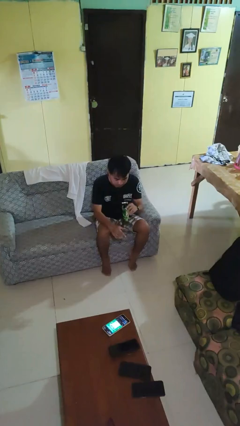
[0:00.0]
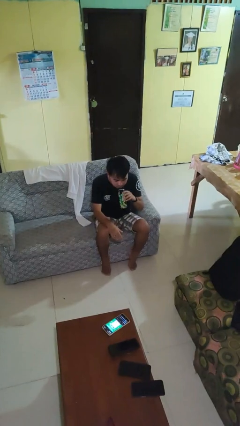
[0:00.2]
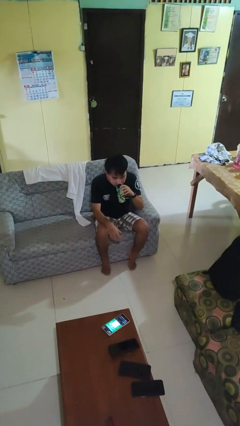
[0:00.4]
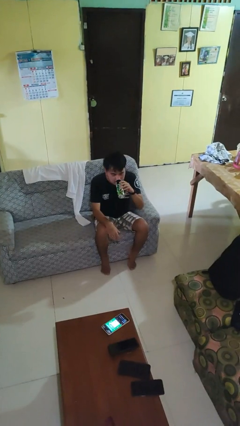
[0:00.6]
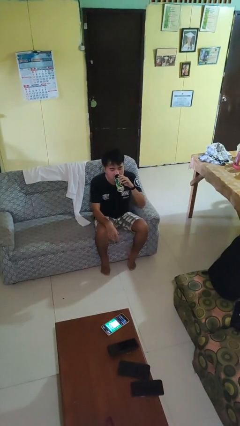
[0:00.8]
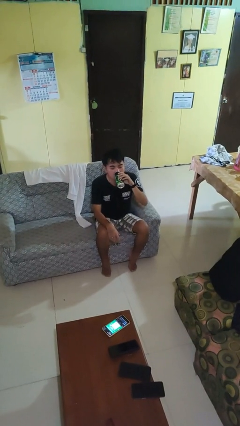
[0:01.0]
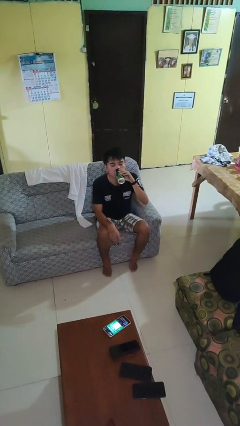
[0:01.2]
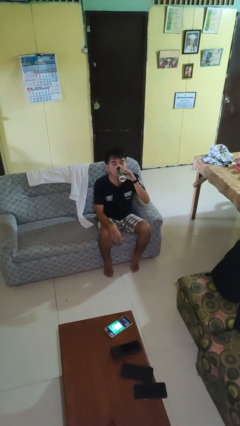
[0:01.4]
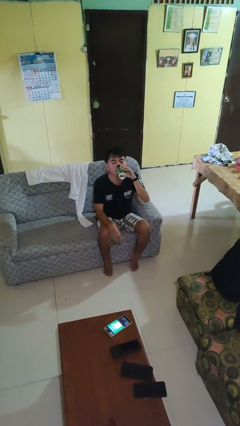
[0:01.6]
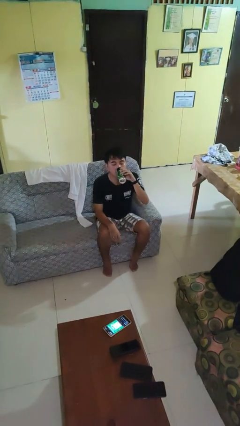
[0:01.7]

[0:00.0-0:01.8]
person drinks from beverage can

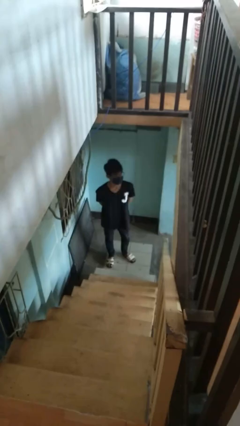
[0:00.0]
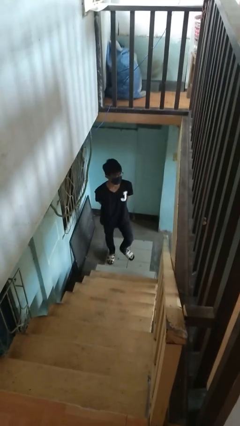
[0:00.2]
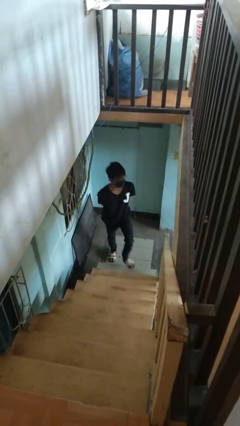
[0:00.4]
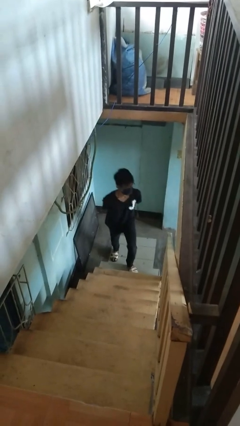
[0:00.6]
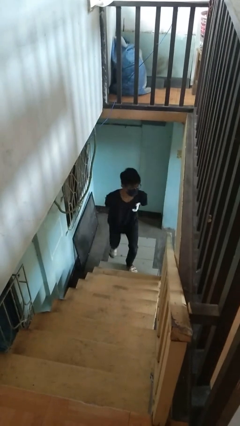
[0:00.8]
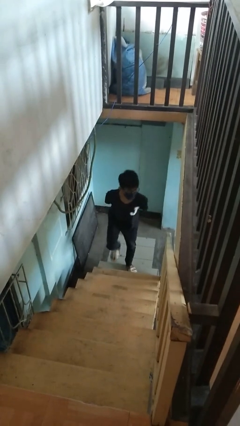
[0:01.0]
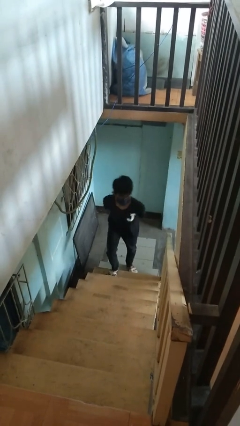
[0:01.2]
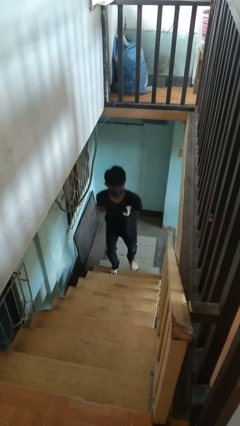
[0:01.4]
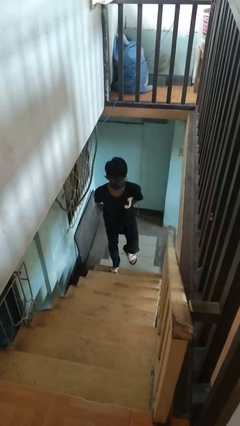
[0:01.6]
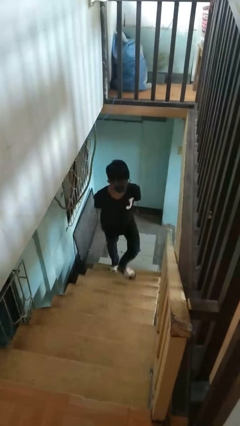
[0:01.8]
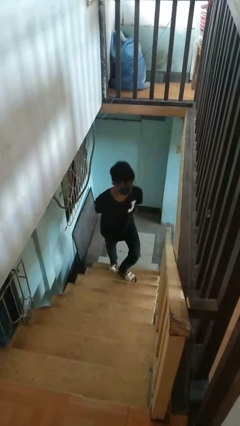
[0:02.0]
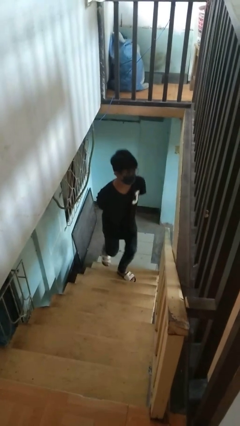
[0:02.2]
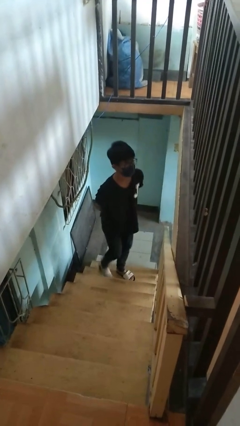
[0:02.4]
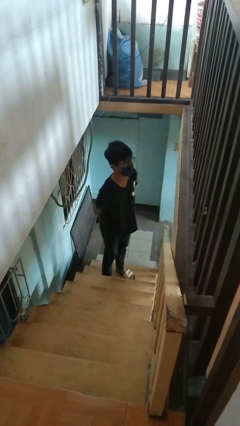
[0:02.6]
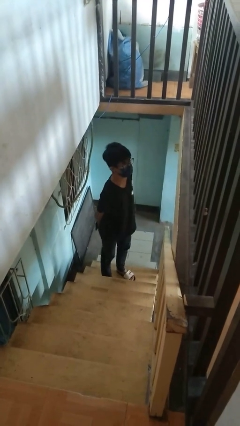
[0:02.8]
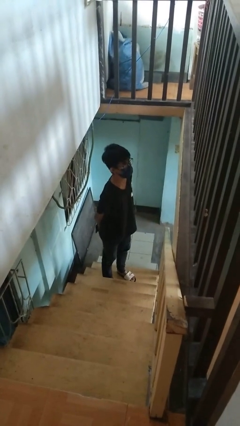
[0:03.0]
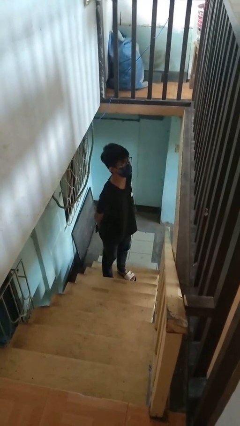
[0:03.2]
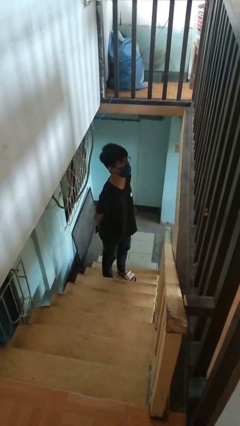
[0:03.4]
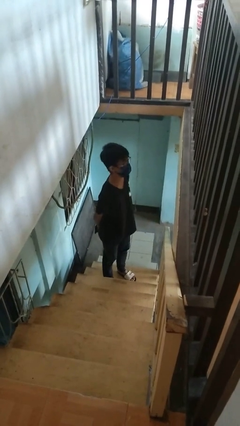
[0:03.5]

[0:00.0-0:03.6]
person climbs up ladder

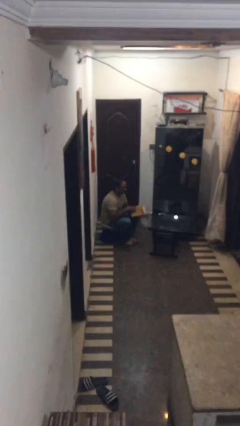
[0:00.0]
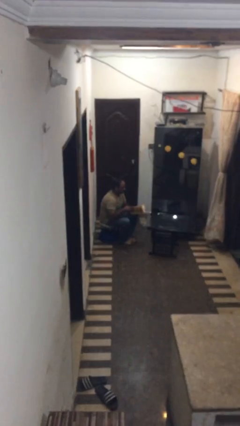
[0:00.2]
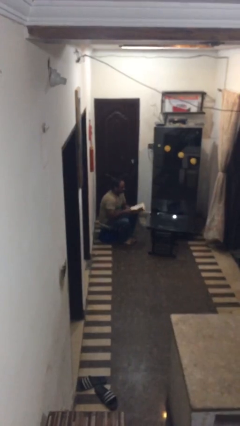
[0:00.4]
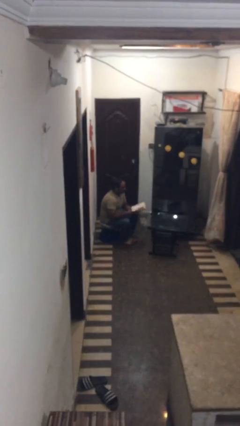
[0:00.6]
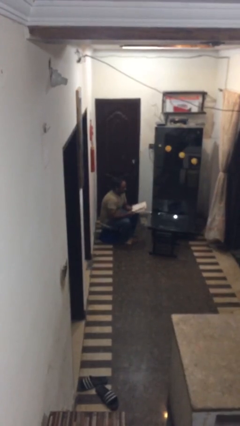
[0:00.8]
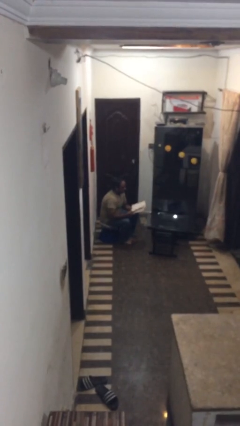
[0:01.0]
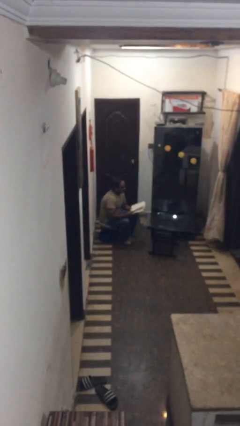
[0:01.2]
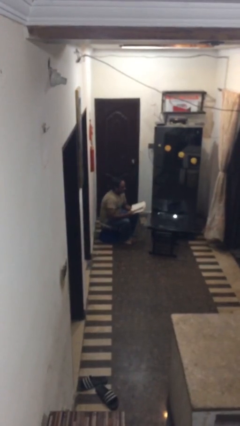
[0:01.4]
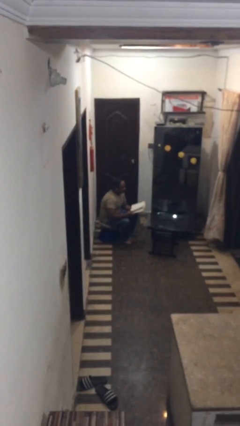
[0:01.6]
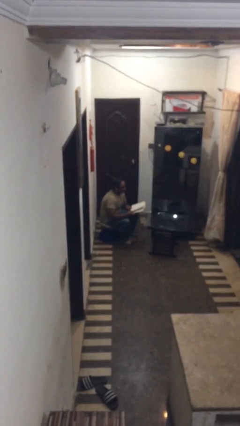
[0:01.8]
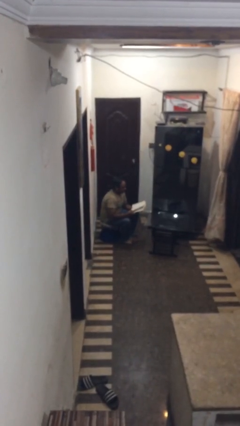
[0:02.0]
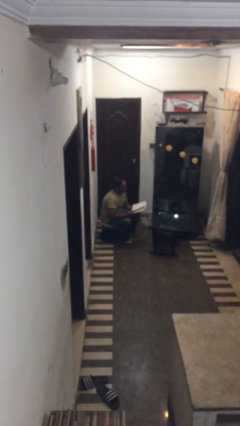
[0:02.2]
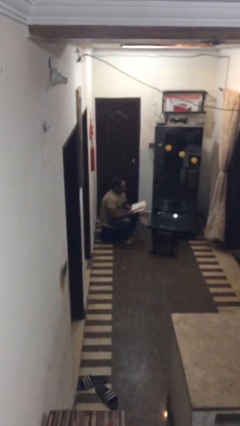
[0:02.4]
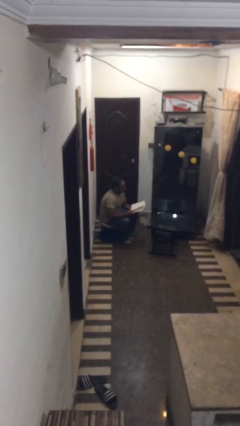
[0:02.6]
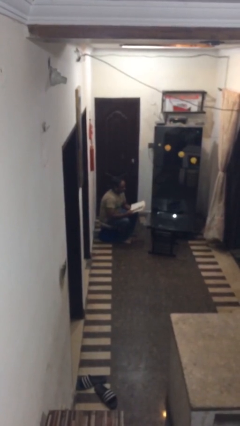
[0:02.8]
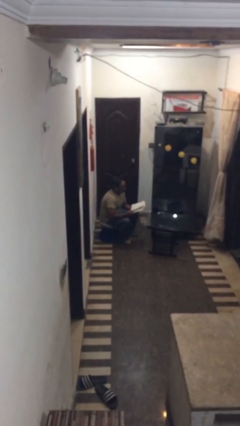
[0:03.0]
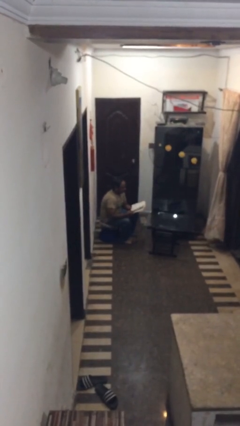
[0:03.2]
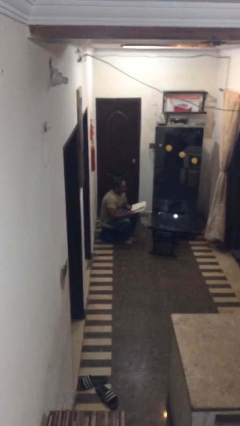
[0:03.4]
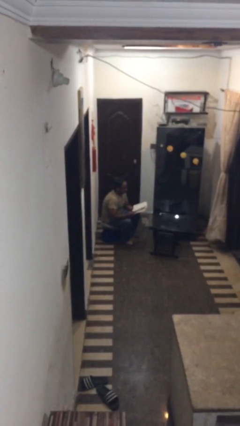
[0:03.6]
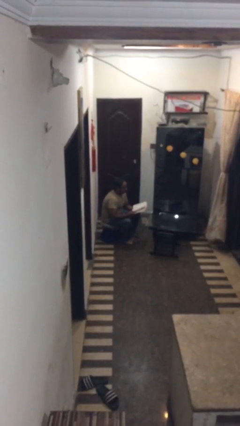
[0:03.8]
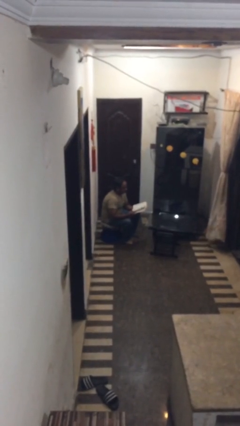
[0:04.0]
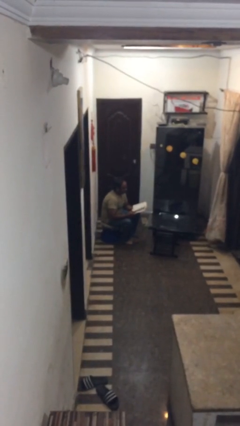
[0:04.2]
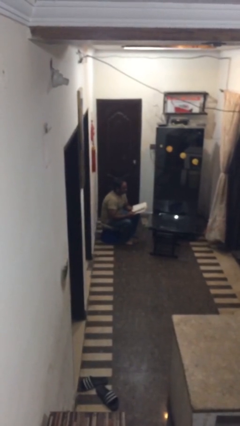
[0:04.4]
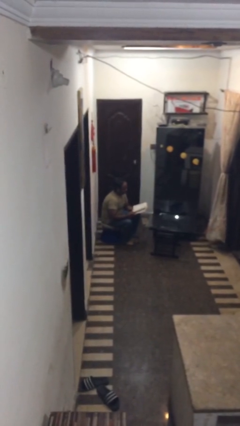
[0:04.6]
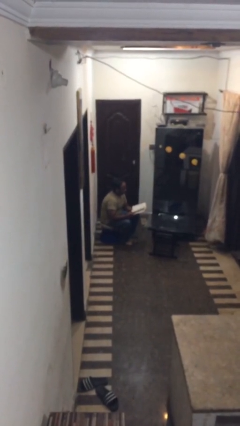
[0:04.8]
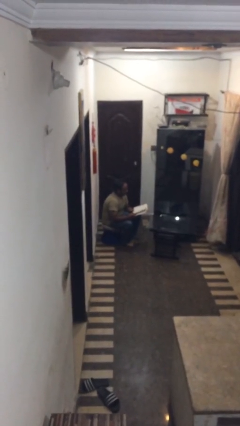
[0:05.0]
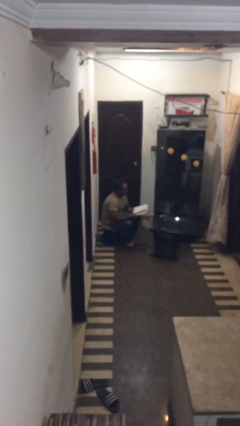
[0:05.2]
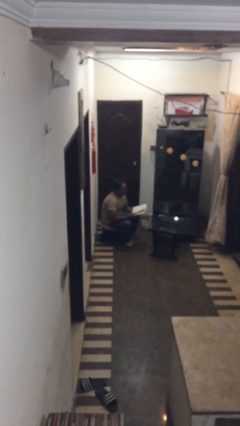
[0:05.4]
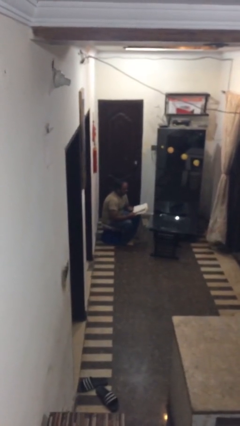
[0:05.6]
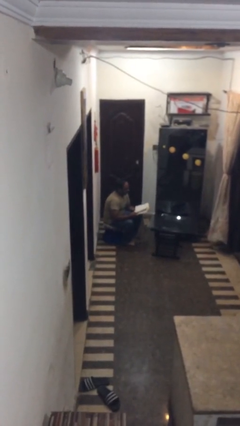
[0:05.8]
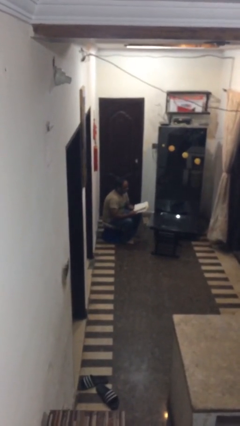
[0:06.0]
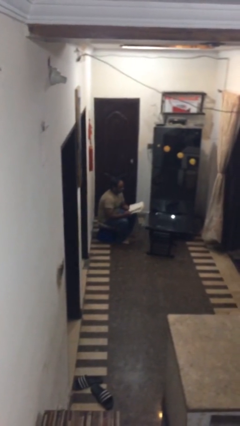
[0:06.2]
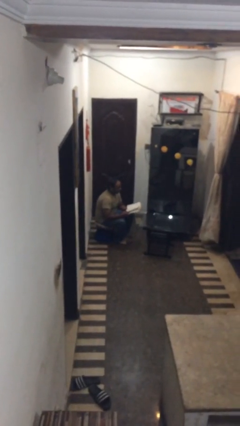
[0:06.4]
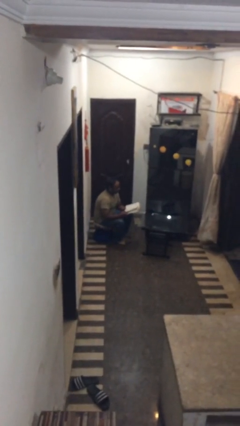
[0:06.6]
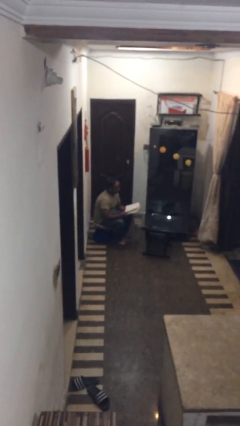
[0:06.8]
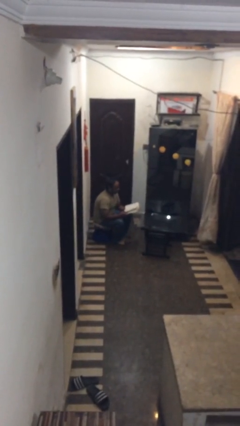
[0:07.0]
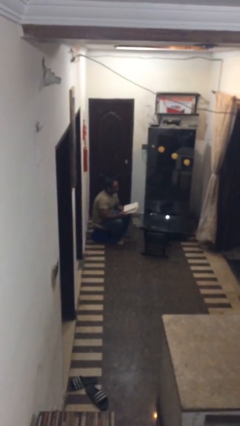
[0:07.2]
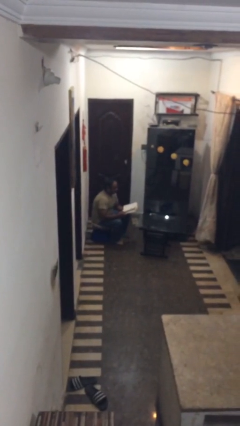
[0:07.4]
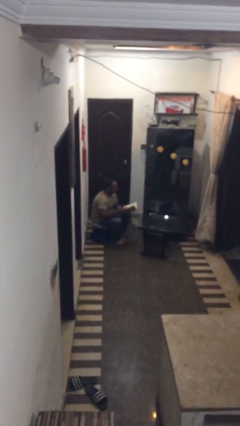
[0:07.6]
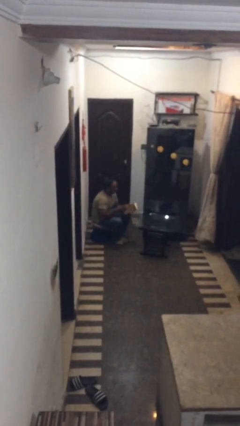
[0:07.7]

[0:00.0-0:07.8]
person reads document

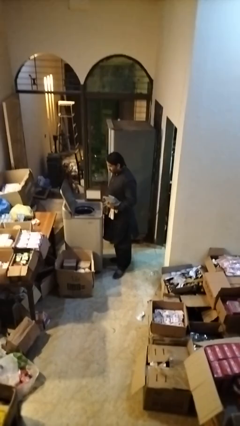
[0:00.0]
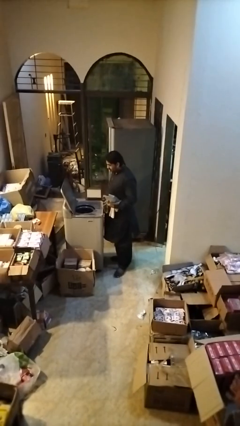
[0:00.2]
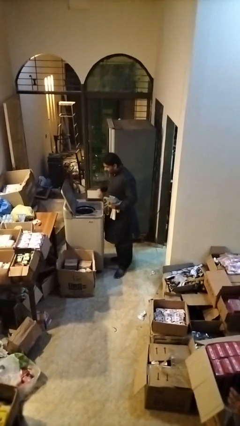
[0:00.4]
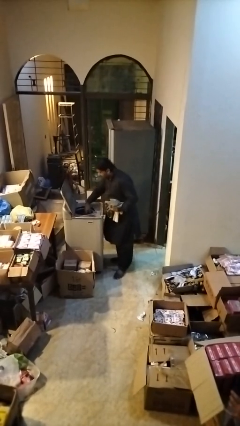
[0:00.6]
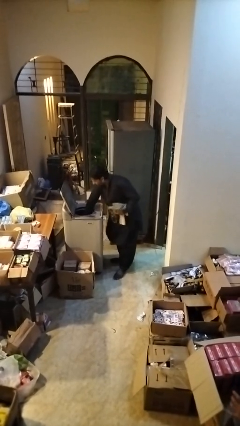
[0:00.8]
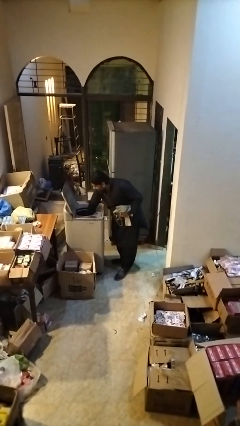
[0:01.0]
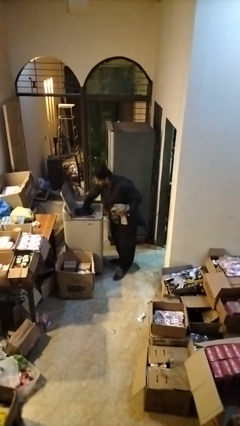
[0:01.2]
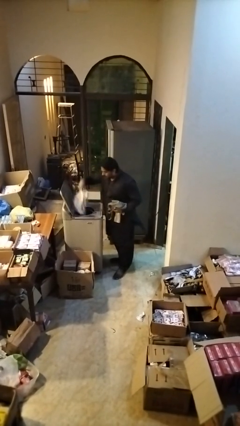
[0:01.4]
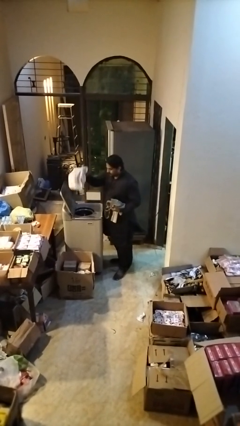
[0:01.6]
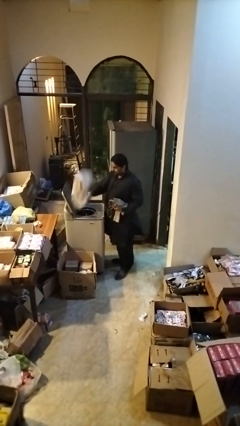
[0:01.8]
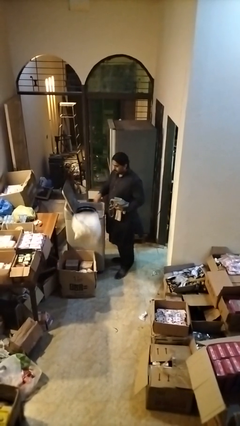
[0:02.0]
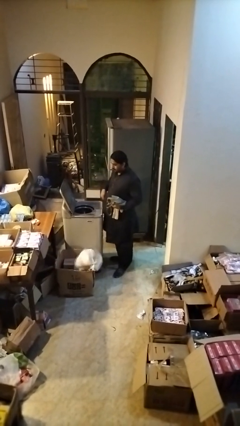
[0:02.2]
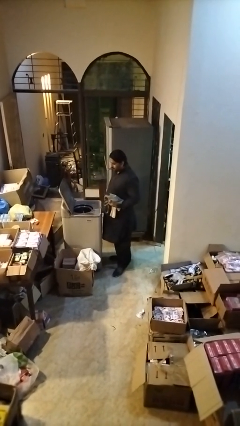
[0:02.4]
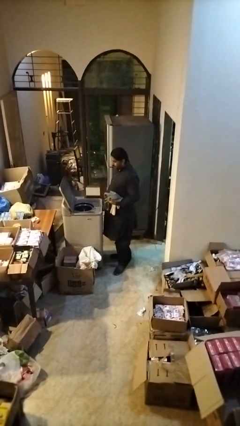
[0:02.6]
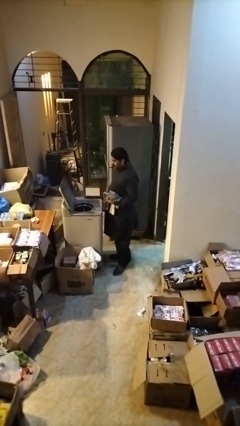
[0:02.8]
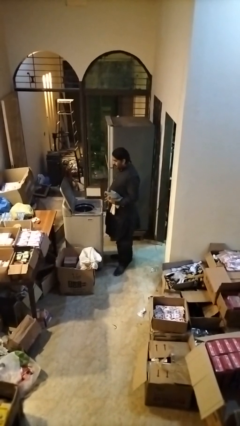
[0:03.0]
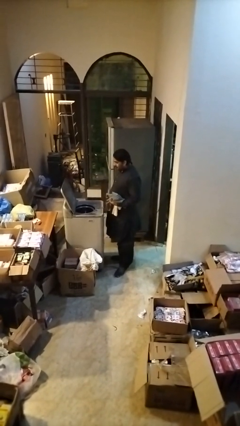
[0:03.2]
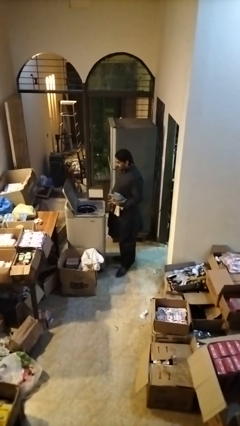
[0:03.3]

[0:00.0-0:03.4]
person unloads dryer

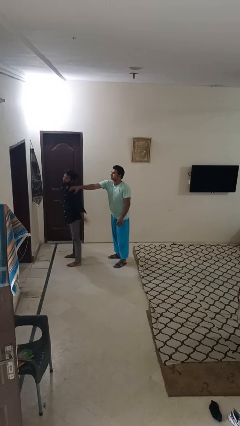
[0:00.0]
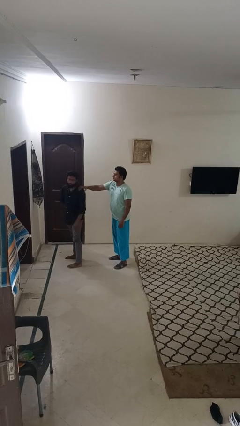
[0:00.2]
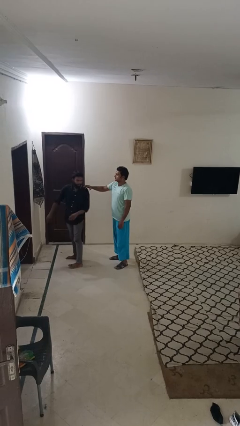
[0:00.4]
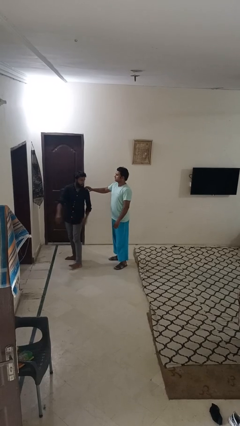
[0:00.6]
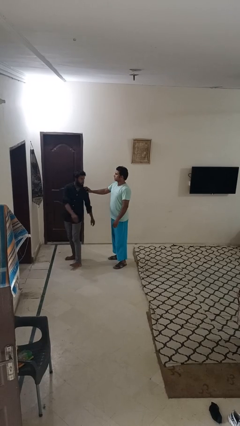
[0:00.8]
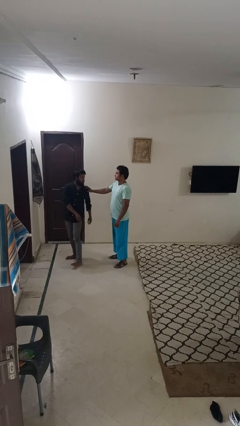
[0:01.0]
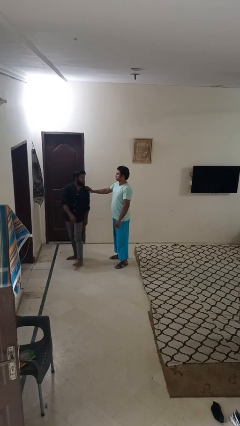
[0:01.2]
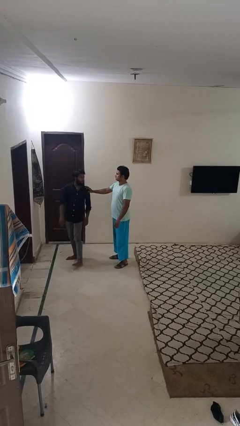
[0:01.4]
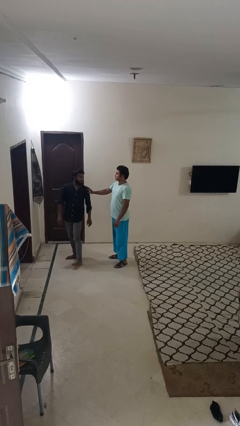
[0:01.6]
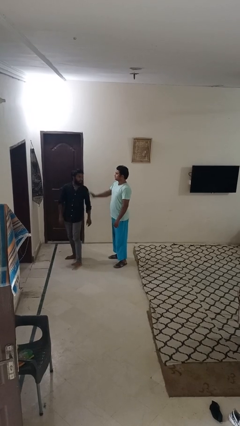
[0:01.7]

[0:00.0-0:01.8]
person spins person around
